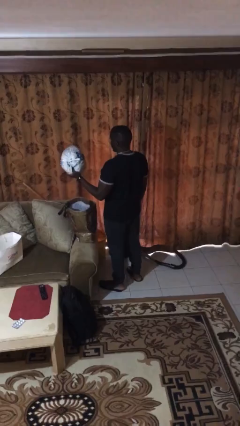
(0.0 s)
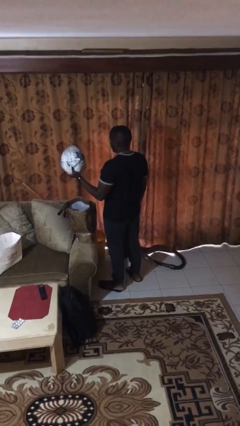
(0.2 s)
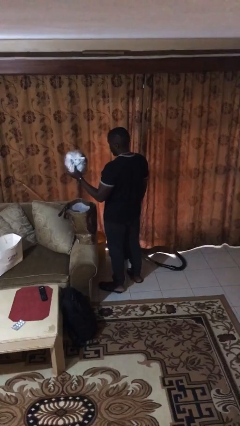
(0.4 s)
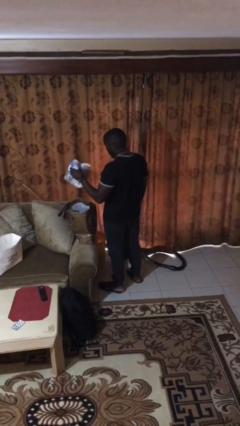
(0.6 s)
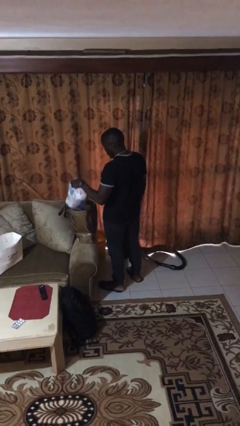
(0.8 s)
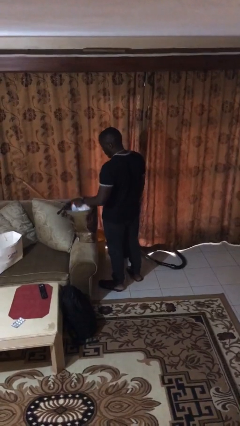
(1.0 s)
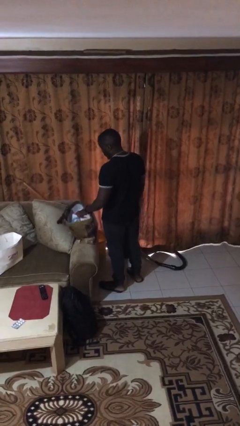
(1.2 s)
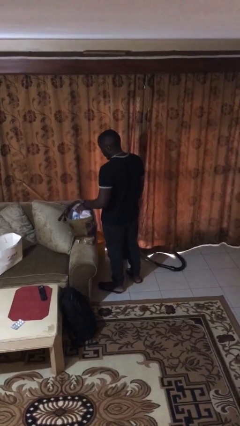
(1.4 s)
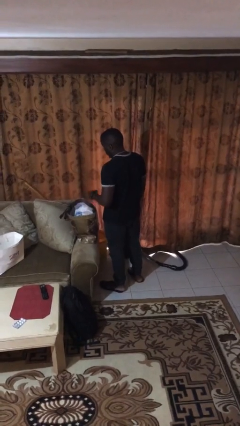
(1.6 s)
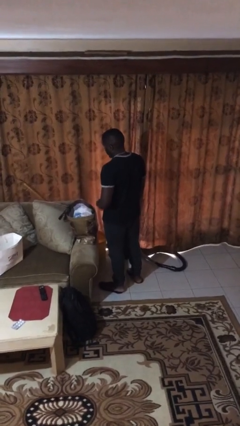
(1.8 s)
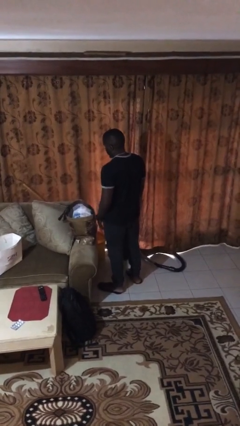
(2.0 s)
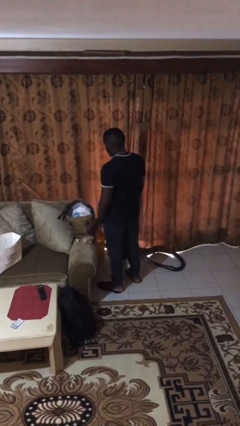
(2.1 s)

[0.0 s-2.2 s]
person puts object into bag

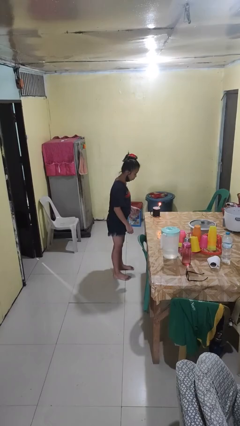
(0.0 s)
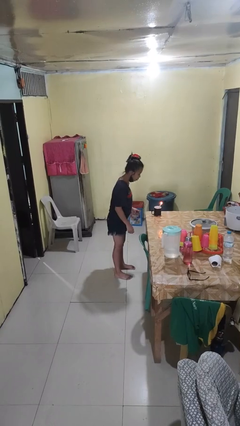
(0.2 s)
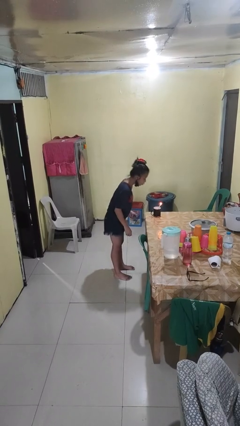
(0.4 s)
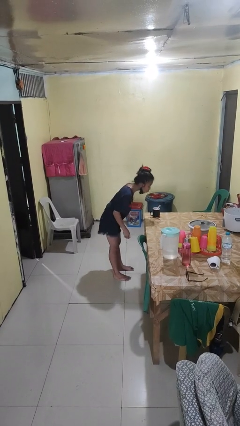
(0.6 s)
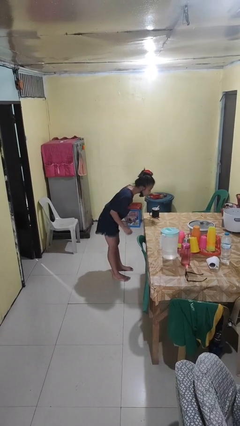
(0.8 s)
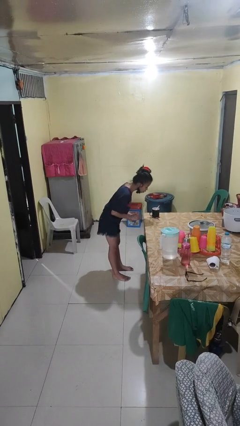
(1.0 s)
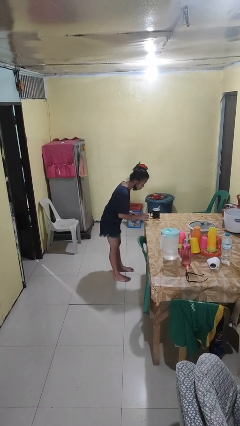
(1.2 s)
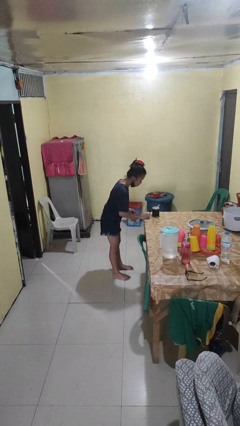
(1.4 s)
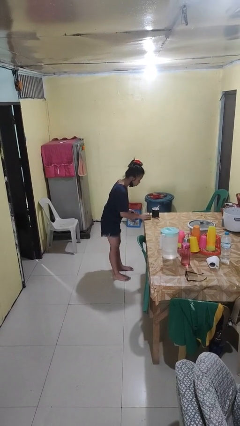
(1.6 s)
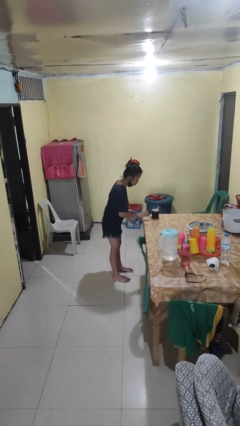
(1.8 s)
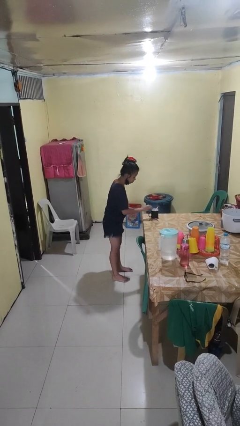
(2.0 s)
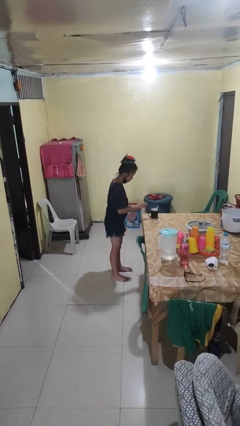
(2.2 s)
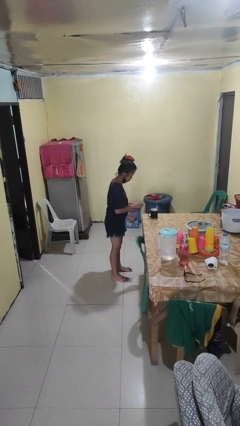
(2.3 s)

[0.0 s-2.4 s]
person extinguishes candle

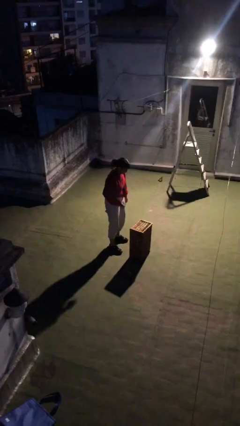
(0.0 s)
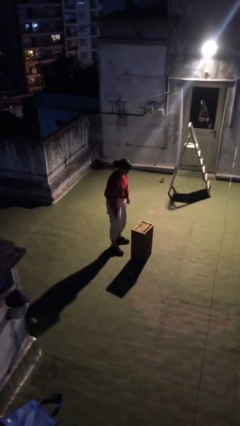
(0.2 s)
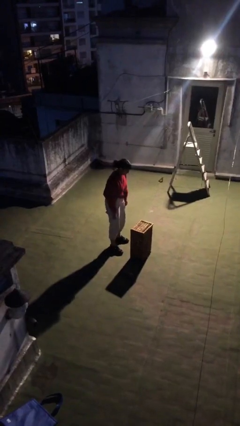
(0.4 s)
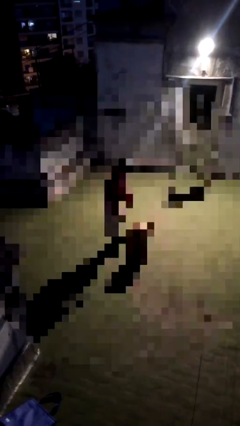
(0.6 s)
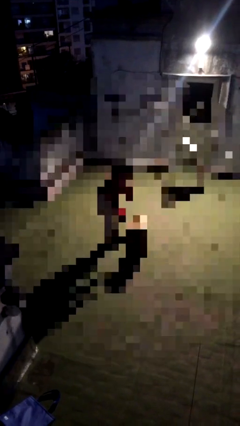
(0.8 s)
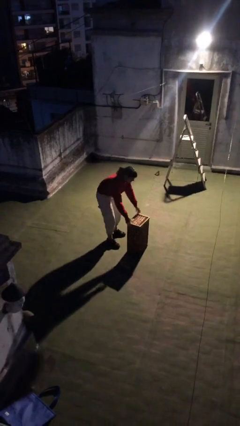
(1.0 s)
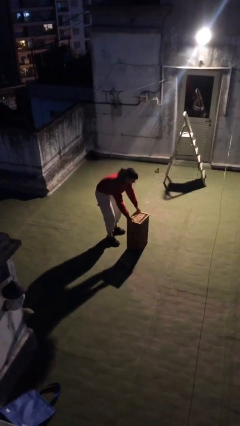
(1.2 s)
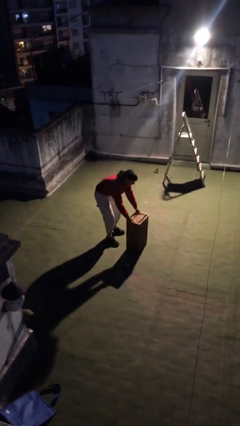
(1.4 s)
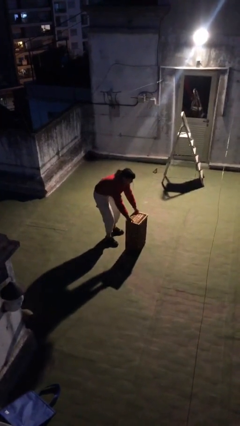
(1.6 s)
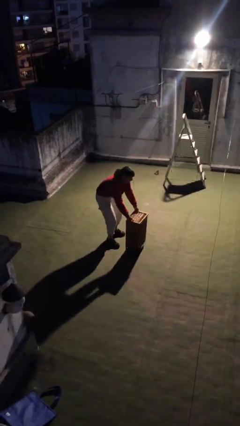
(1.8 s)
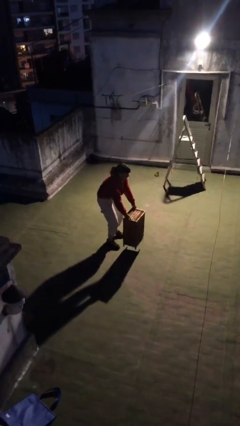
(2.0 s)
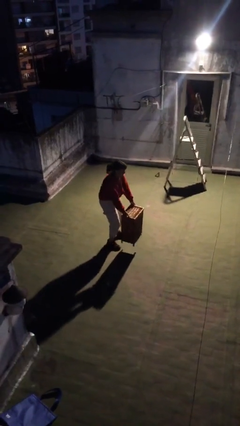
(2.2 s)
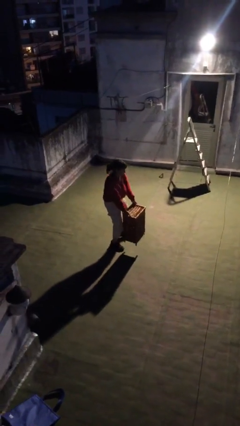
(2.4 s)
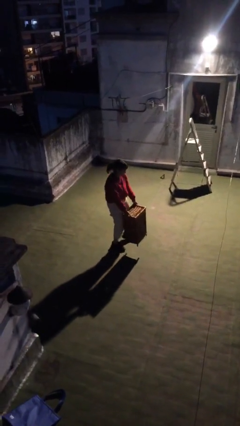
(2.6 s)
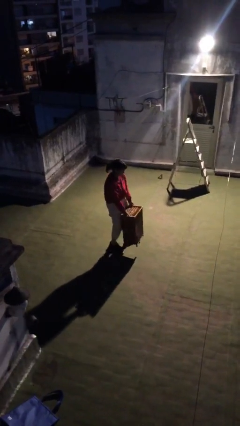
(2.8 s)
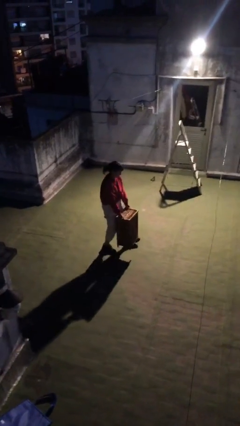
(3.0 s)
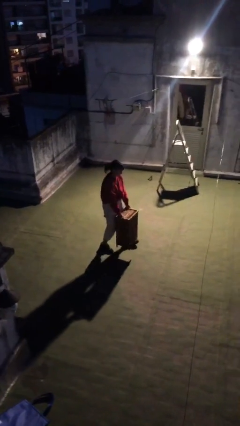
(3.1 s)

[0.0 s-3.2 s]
person picks up object from floor

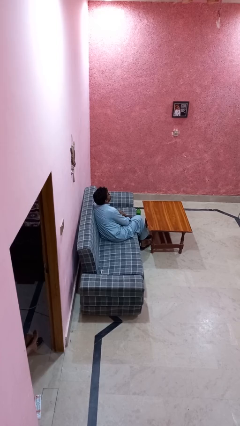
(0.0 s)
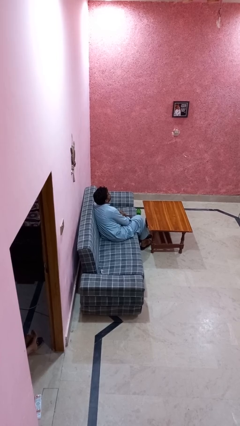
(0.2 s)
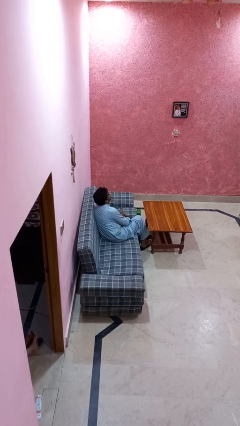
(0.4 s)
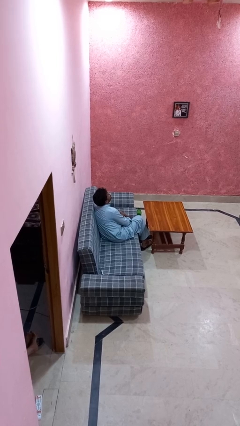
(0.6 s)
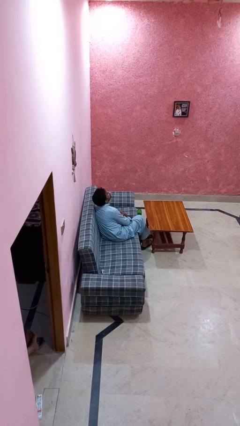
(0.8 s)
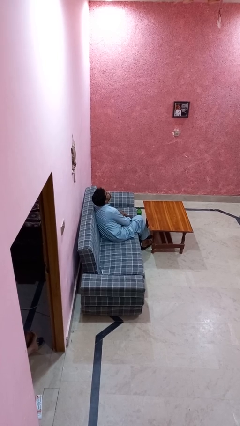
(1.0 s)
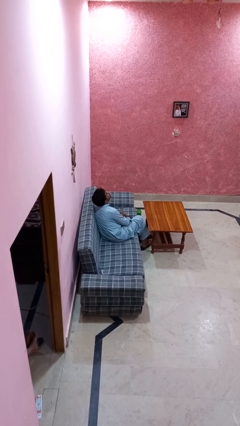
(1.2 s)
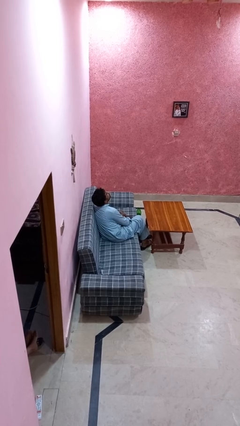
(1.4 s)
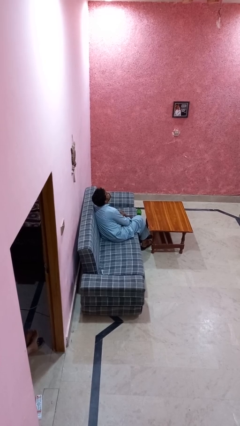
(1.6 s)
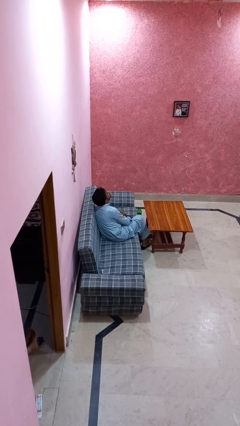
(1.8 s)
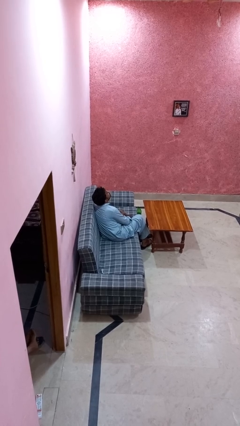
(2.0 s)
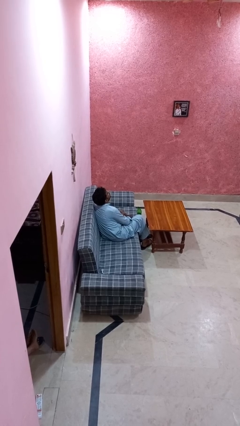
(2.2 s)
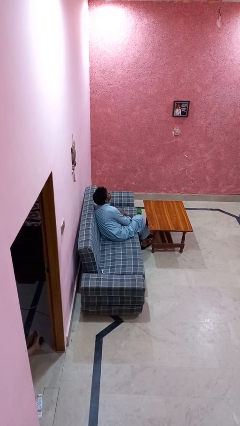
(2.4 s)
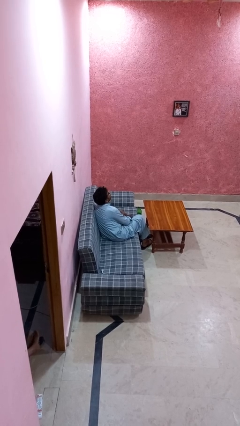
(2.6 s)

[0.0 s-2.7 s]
person sticks out tongue

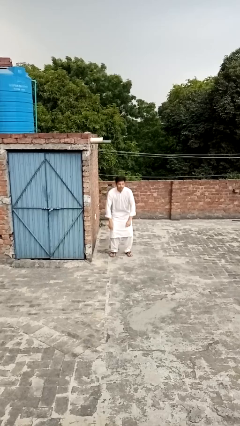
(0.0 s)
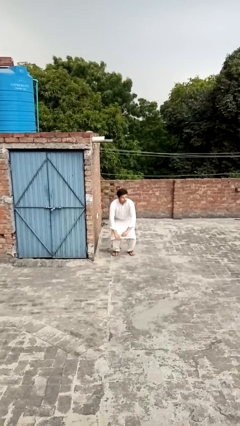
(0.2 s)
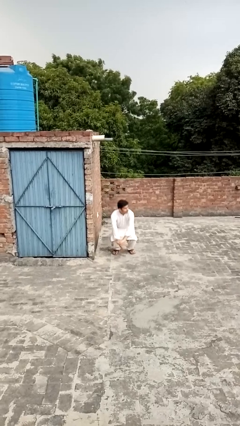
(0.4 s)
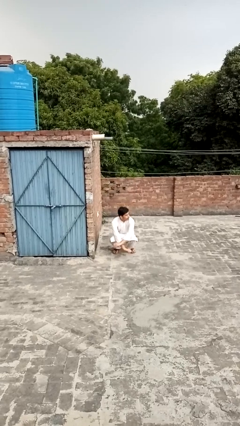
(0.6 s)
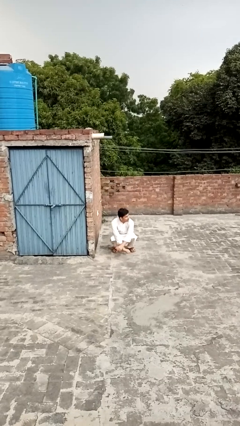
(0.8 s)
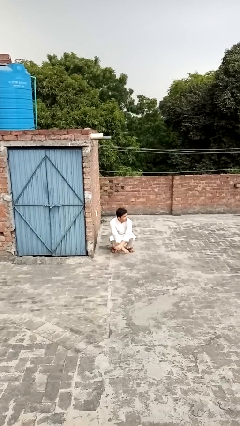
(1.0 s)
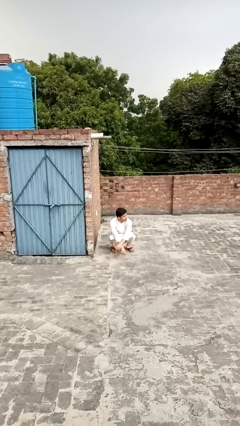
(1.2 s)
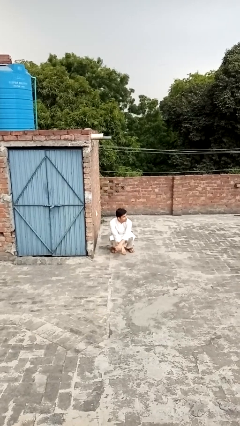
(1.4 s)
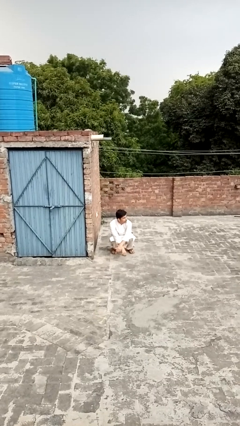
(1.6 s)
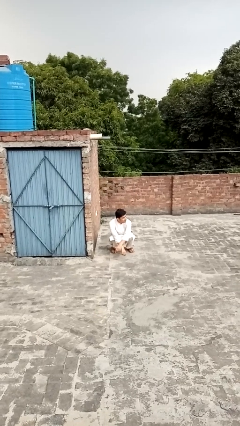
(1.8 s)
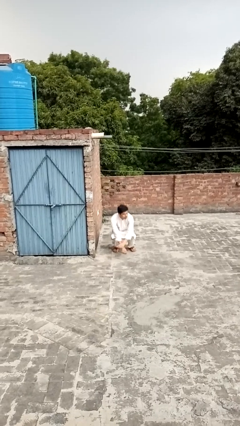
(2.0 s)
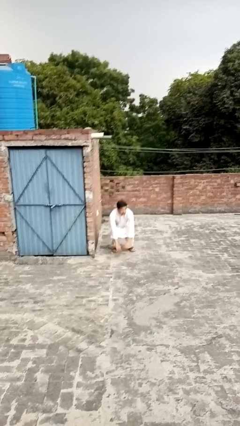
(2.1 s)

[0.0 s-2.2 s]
person exercises with situp

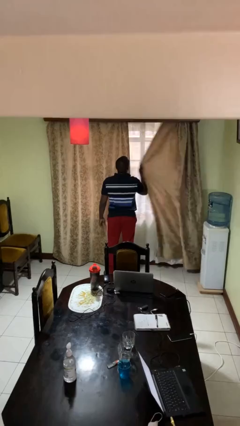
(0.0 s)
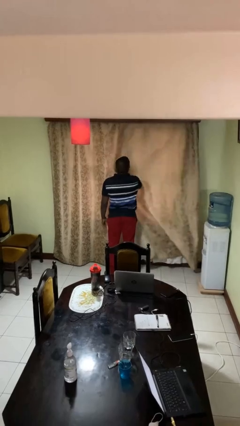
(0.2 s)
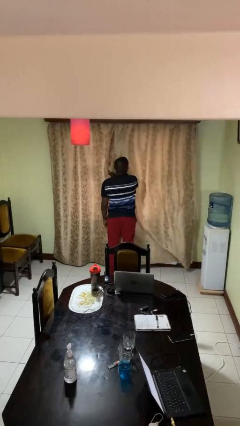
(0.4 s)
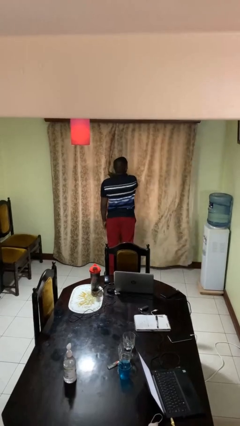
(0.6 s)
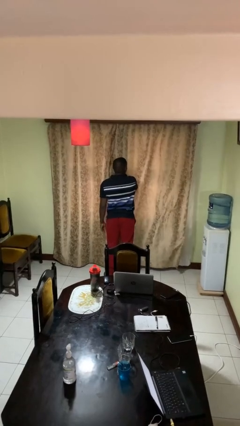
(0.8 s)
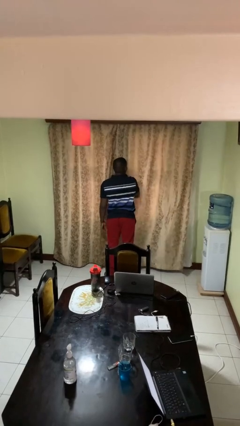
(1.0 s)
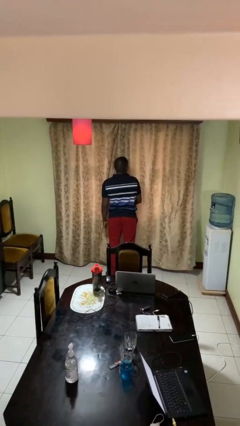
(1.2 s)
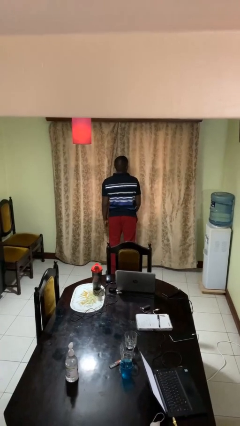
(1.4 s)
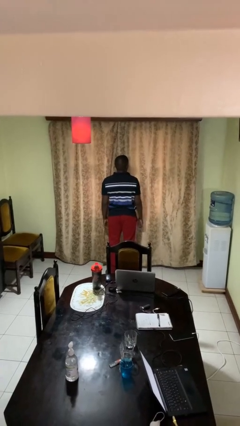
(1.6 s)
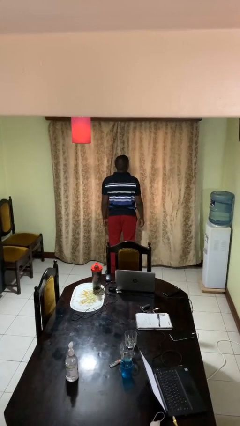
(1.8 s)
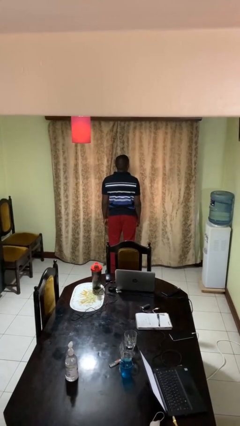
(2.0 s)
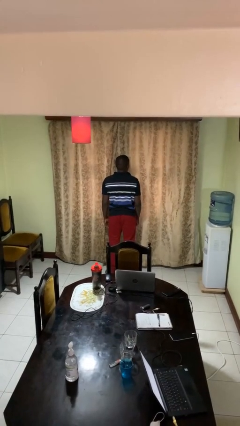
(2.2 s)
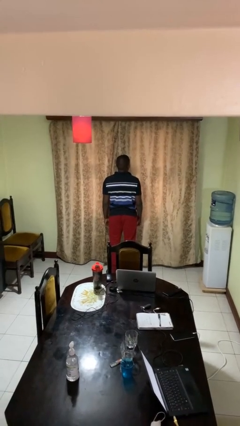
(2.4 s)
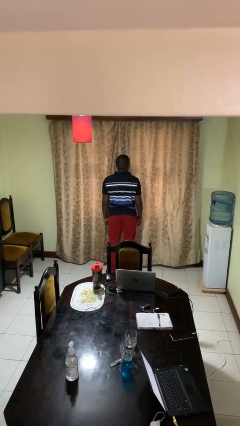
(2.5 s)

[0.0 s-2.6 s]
person closes curtains

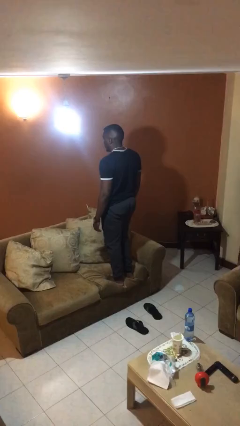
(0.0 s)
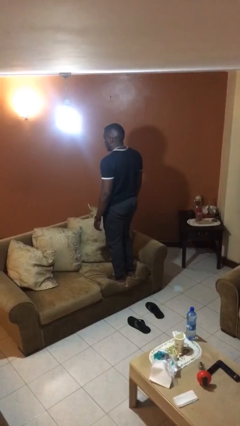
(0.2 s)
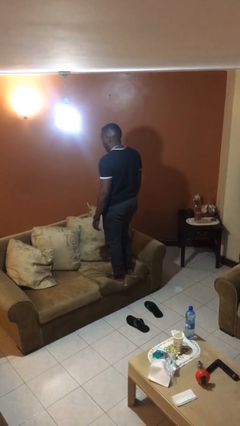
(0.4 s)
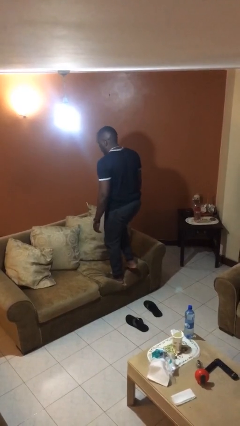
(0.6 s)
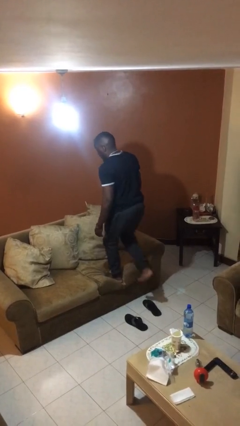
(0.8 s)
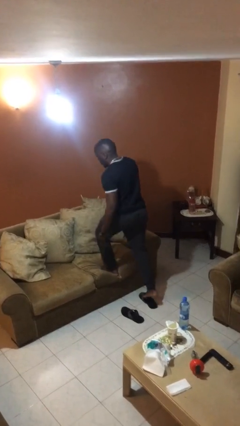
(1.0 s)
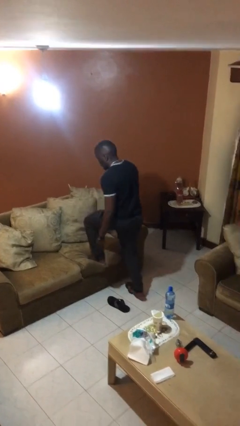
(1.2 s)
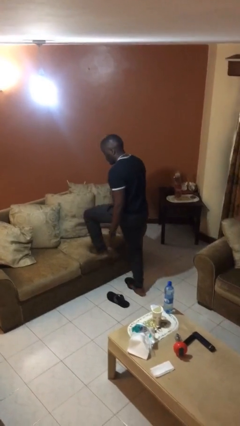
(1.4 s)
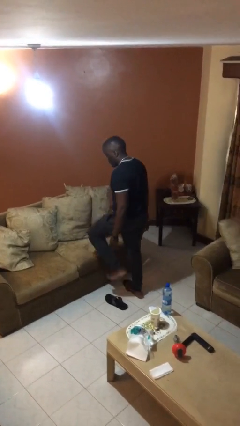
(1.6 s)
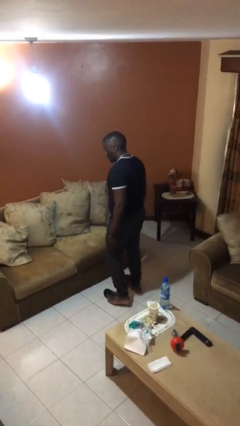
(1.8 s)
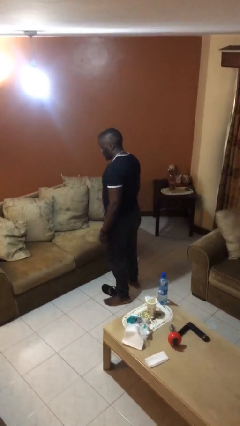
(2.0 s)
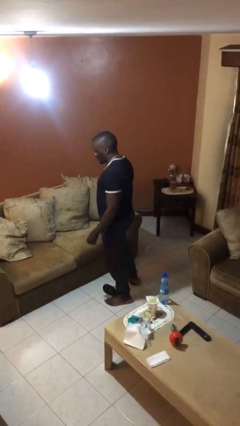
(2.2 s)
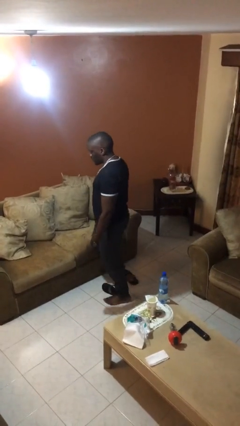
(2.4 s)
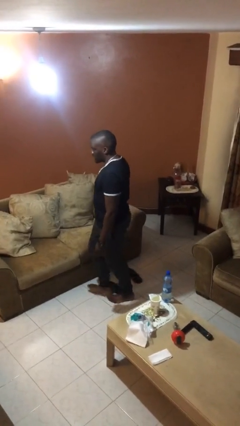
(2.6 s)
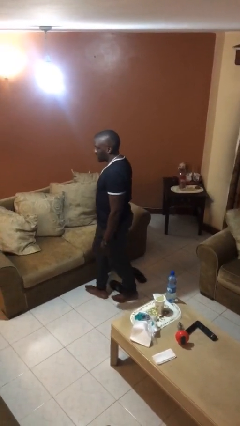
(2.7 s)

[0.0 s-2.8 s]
person climbs off chair
